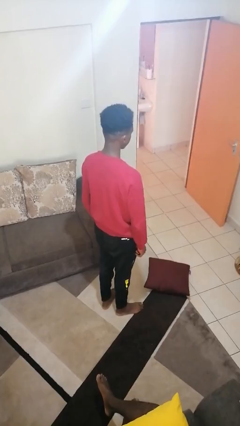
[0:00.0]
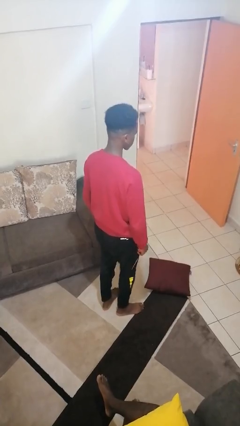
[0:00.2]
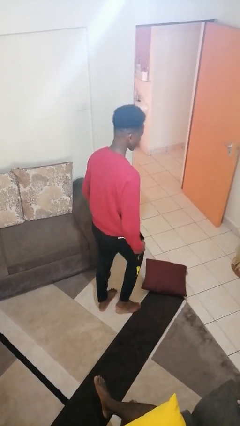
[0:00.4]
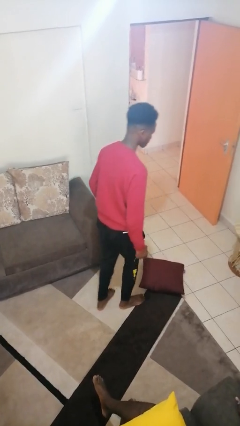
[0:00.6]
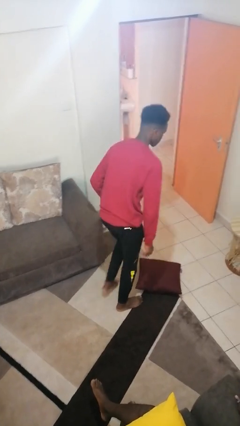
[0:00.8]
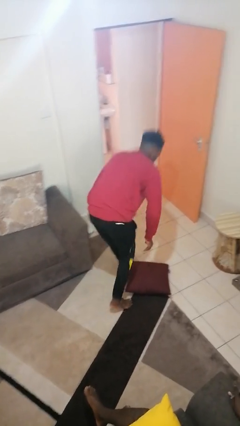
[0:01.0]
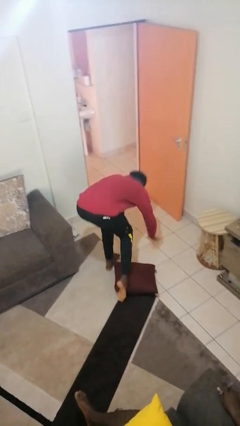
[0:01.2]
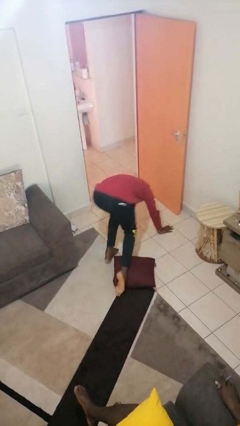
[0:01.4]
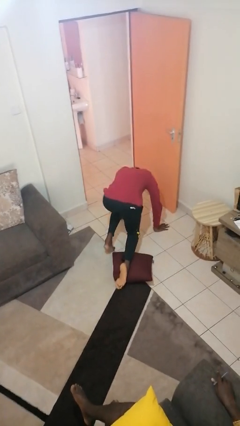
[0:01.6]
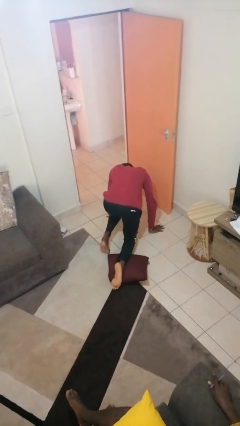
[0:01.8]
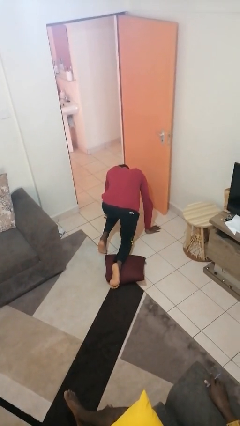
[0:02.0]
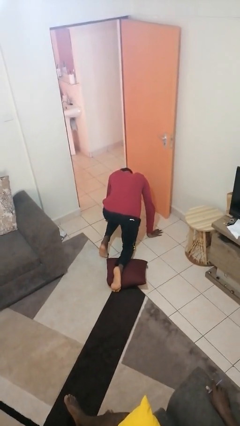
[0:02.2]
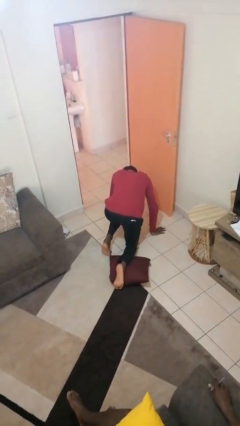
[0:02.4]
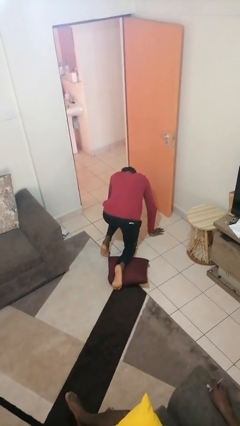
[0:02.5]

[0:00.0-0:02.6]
person trips on object on floor

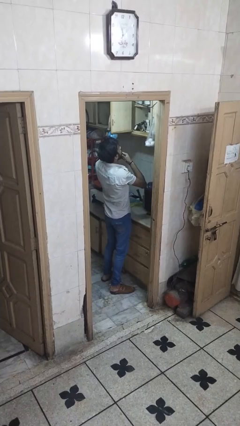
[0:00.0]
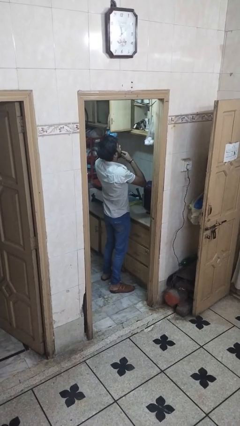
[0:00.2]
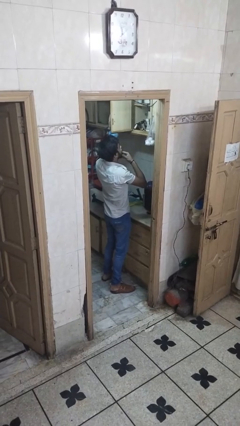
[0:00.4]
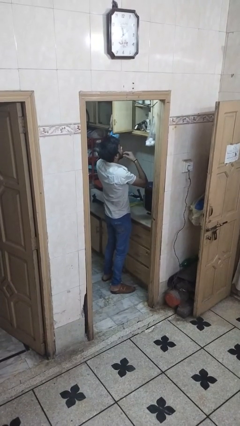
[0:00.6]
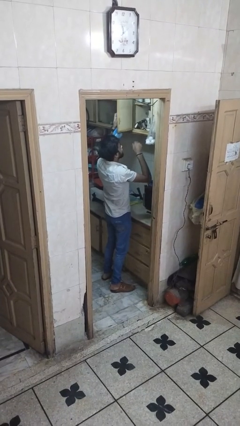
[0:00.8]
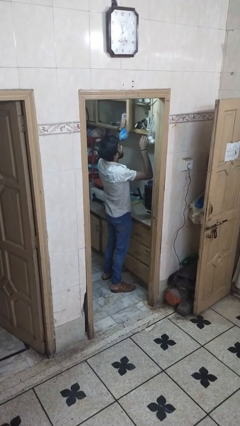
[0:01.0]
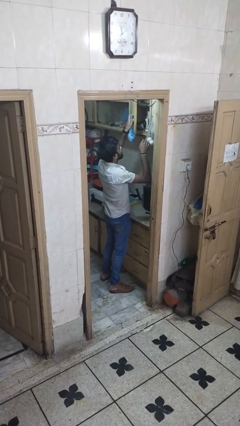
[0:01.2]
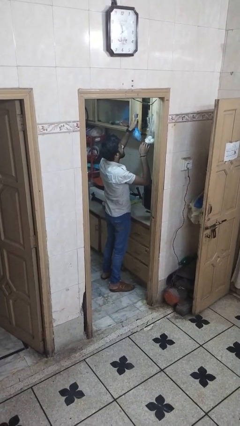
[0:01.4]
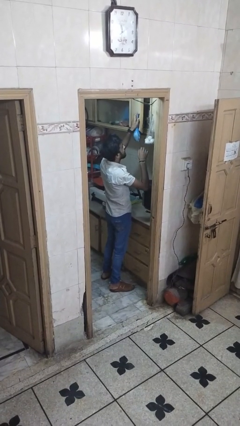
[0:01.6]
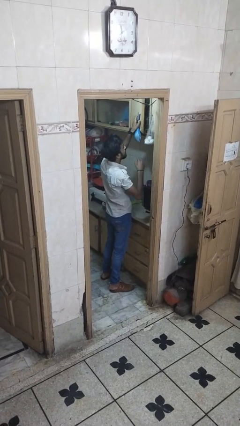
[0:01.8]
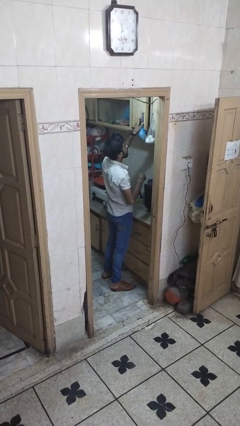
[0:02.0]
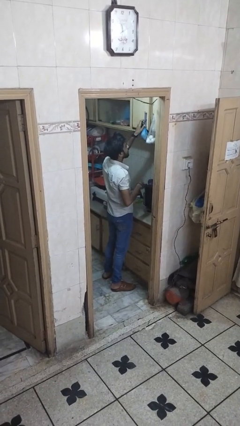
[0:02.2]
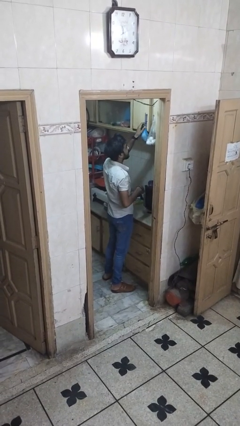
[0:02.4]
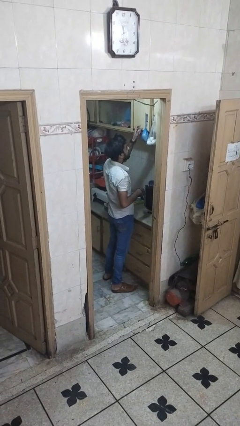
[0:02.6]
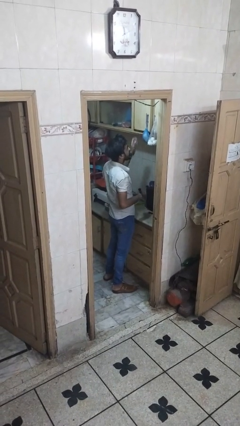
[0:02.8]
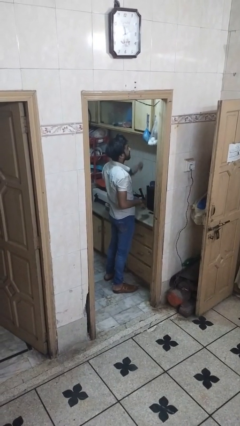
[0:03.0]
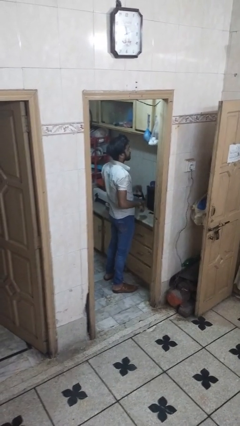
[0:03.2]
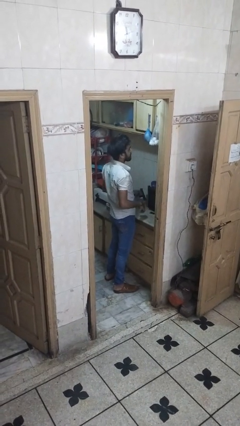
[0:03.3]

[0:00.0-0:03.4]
person closes cabinet

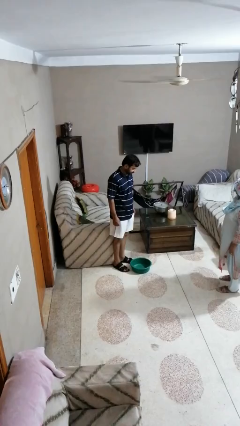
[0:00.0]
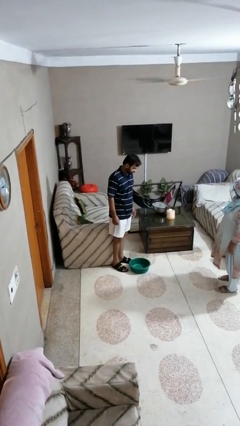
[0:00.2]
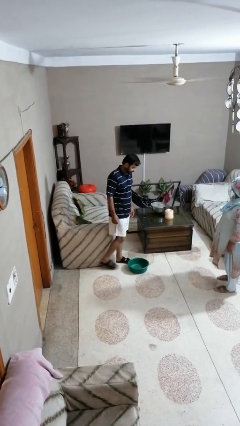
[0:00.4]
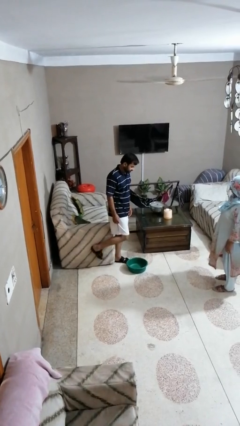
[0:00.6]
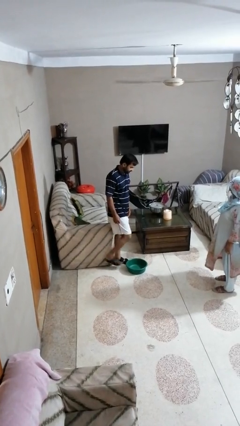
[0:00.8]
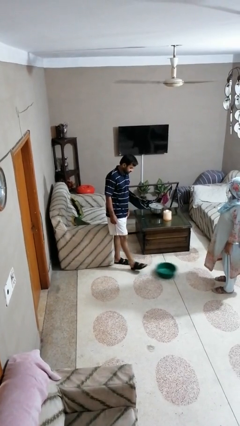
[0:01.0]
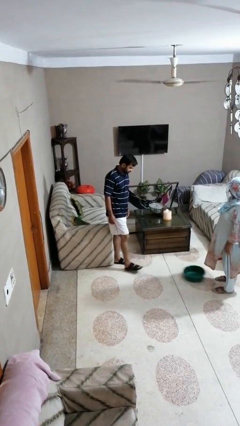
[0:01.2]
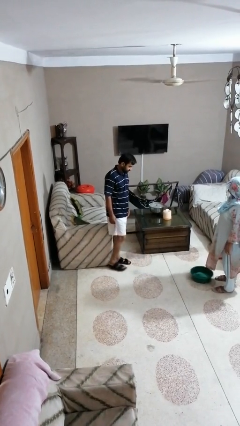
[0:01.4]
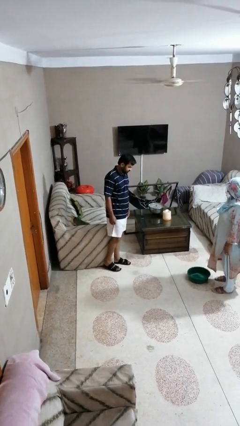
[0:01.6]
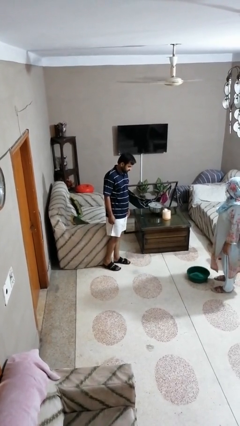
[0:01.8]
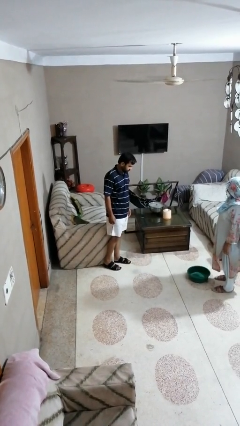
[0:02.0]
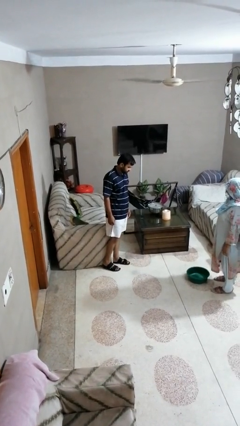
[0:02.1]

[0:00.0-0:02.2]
person kicks object to person

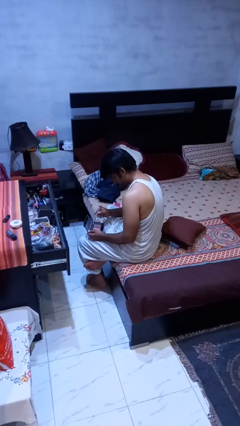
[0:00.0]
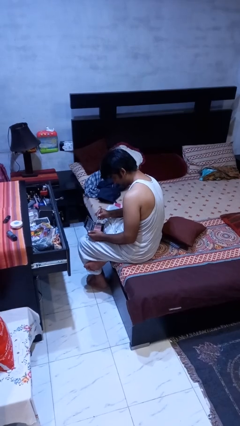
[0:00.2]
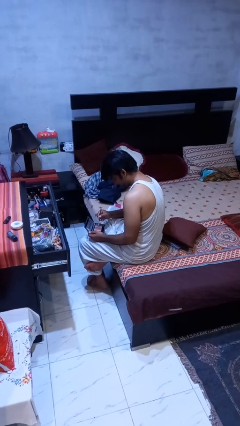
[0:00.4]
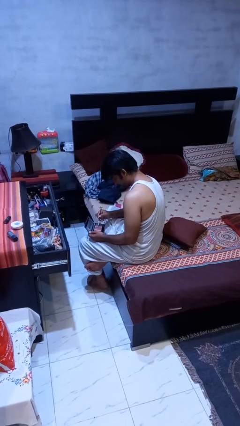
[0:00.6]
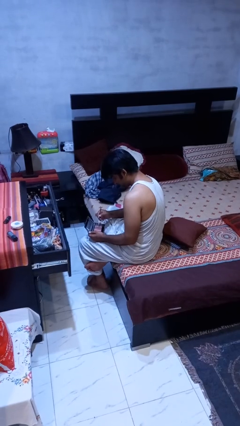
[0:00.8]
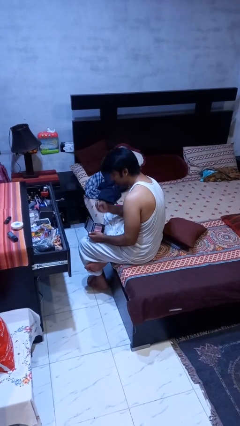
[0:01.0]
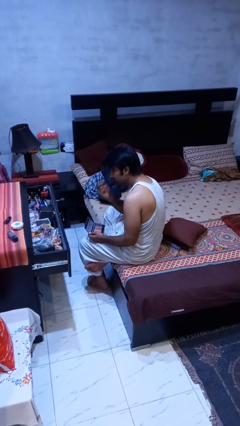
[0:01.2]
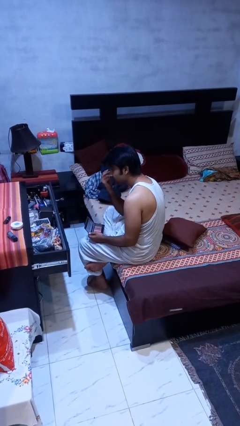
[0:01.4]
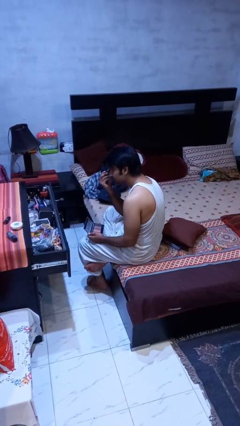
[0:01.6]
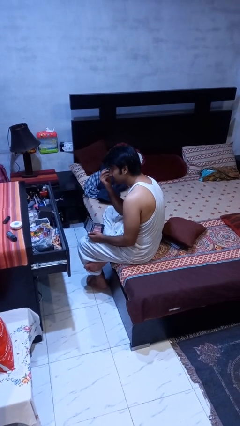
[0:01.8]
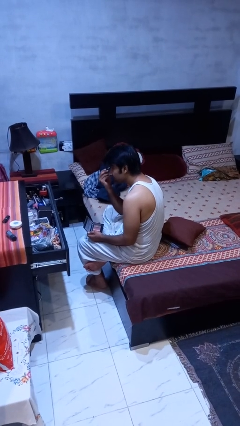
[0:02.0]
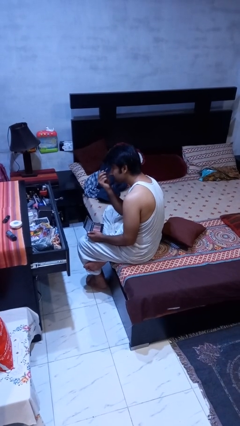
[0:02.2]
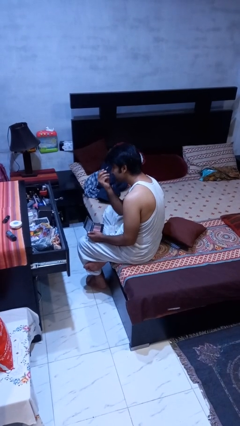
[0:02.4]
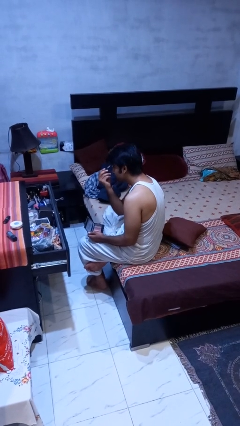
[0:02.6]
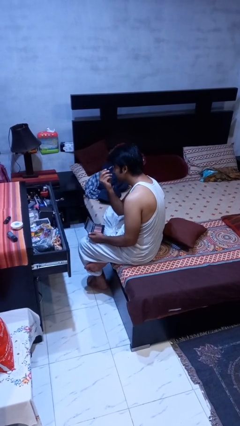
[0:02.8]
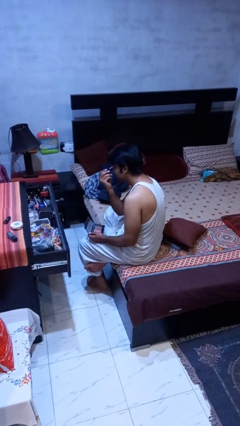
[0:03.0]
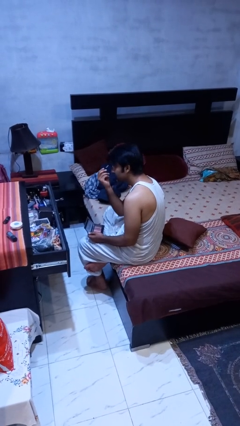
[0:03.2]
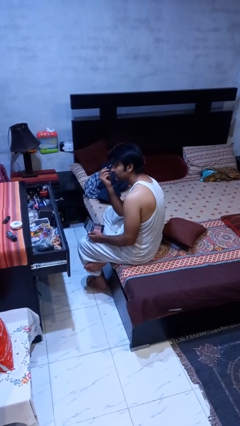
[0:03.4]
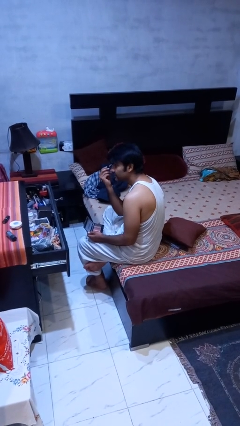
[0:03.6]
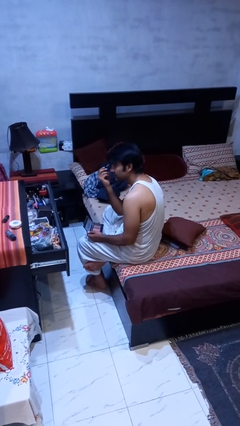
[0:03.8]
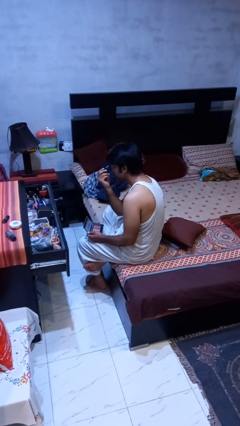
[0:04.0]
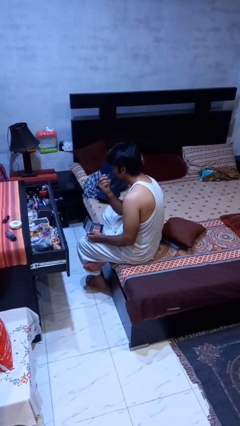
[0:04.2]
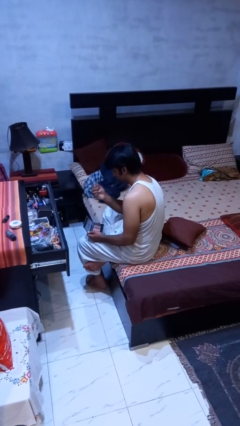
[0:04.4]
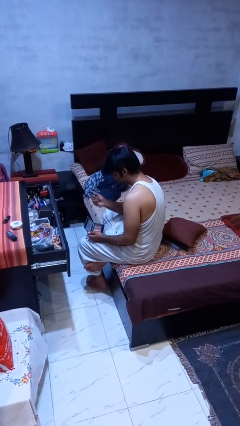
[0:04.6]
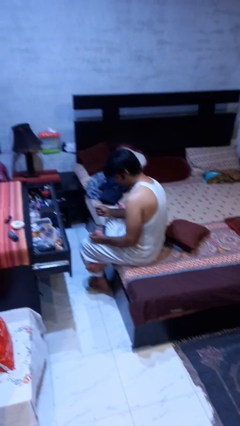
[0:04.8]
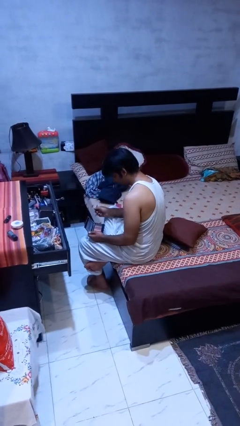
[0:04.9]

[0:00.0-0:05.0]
person applies eye makeup

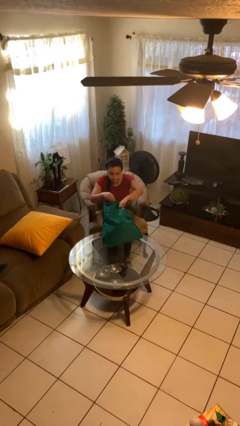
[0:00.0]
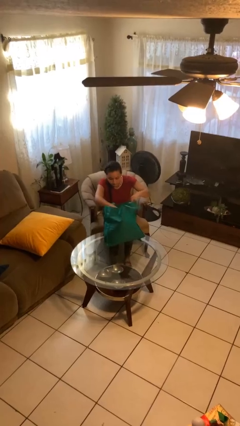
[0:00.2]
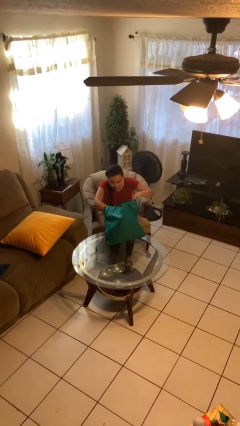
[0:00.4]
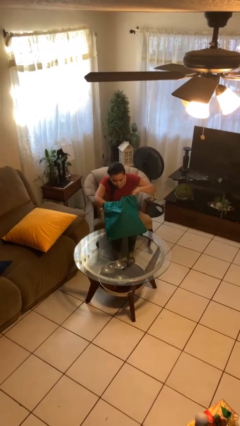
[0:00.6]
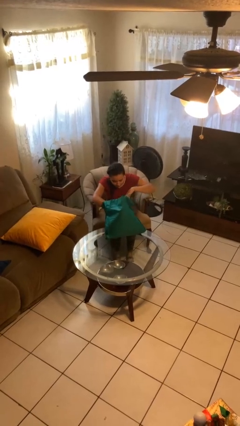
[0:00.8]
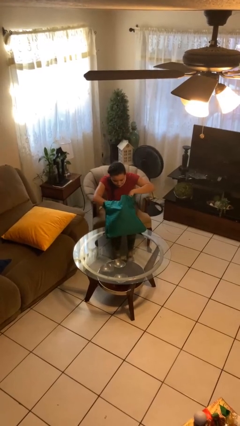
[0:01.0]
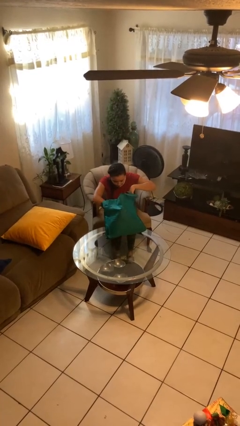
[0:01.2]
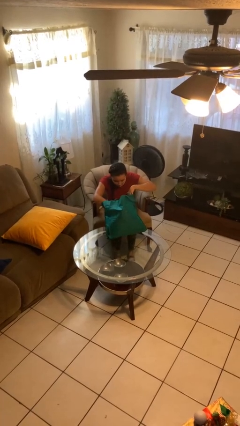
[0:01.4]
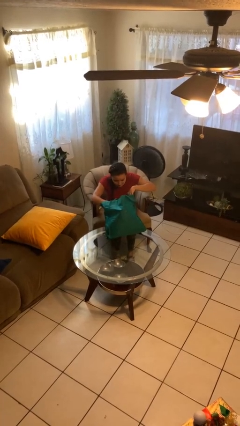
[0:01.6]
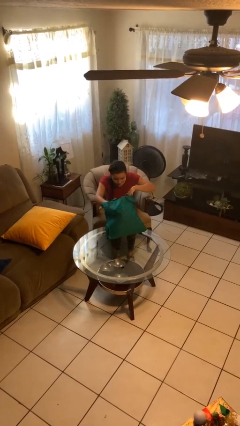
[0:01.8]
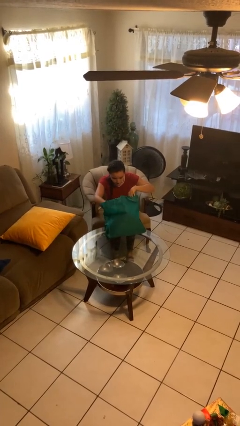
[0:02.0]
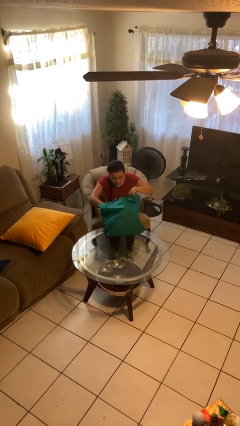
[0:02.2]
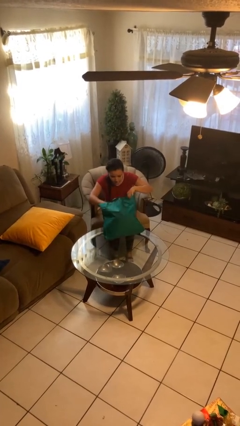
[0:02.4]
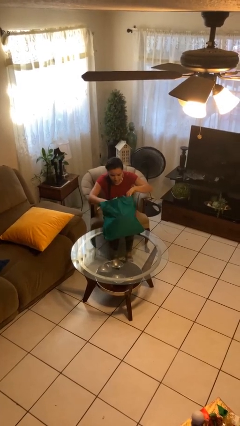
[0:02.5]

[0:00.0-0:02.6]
person searches in bag

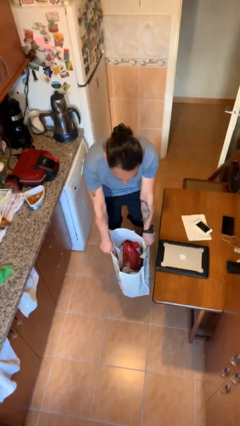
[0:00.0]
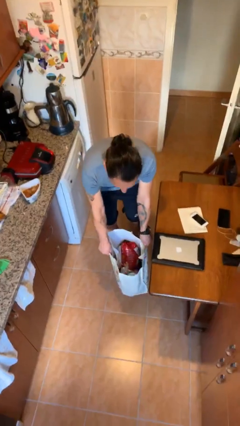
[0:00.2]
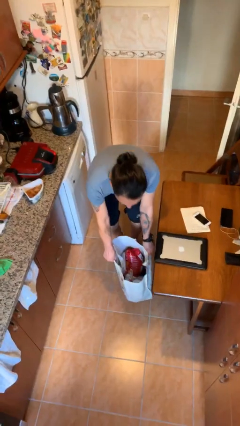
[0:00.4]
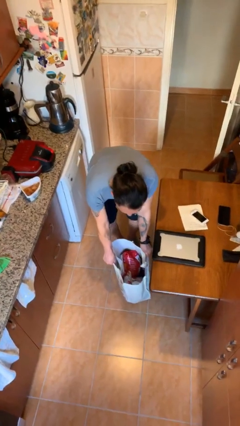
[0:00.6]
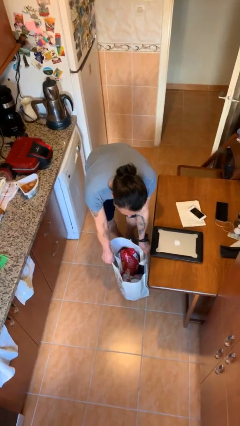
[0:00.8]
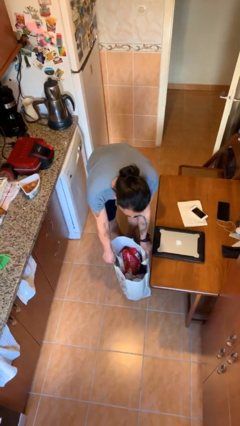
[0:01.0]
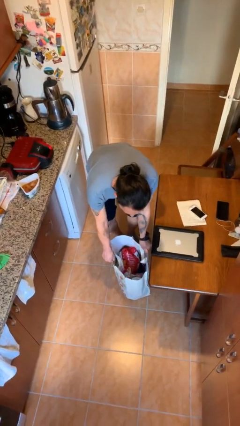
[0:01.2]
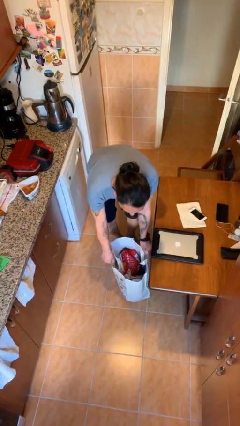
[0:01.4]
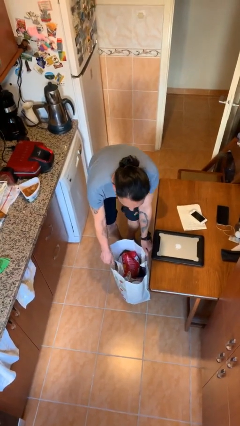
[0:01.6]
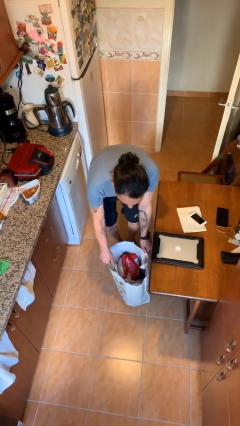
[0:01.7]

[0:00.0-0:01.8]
person puts down object on floor
